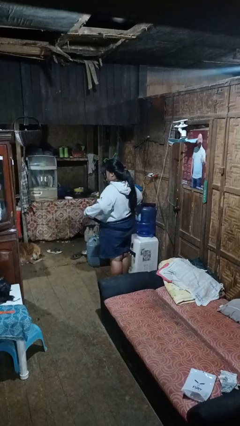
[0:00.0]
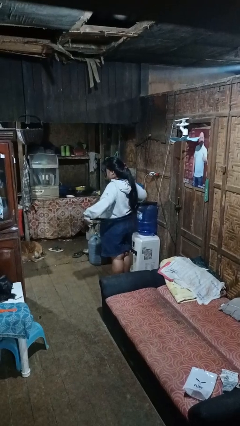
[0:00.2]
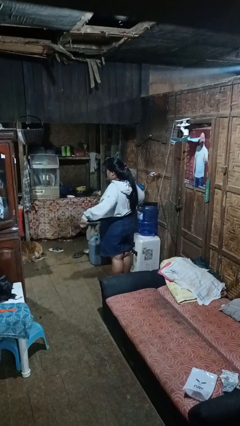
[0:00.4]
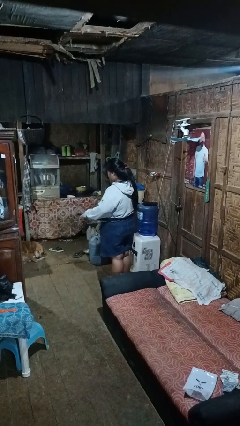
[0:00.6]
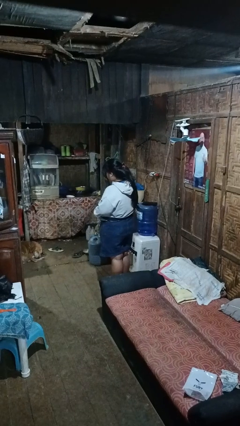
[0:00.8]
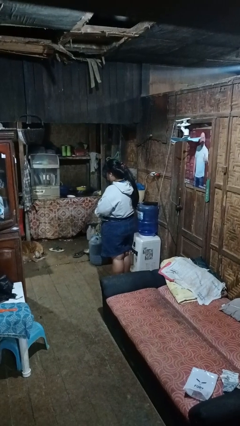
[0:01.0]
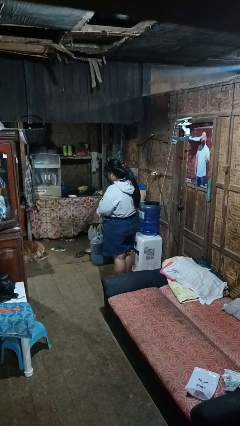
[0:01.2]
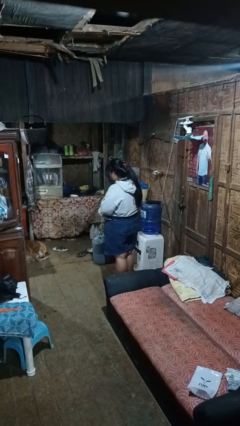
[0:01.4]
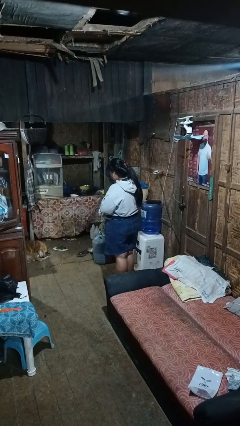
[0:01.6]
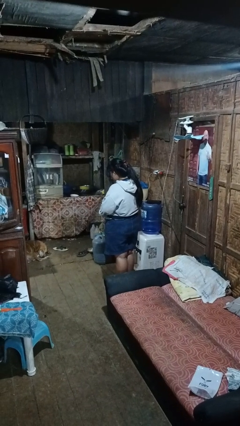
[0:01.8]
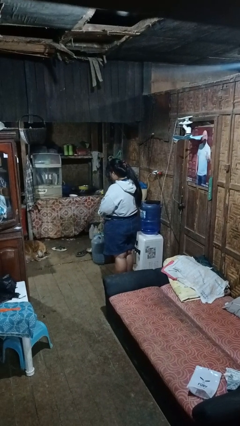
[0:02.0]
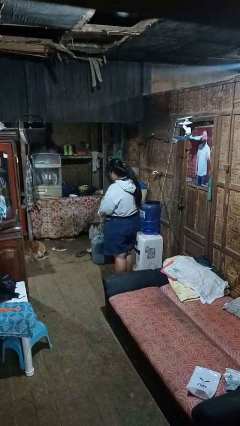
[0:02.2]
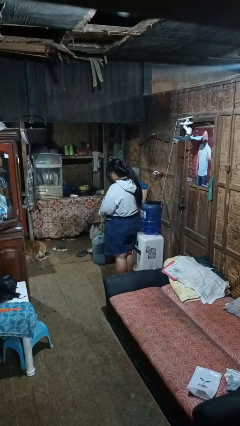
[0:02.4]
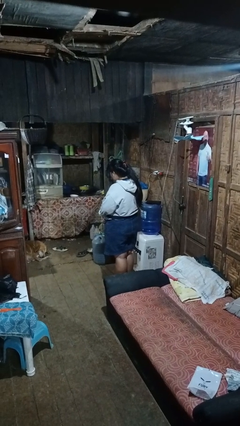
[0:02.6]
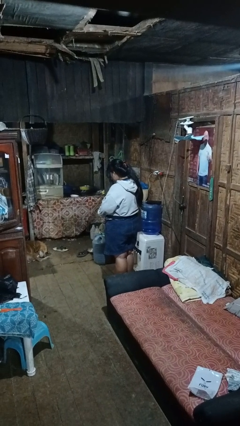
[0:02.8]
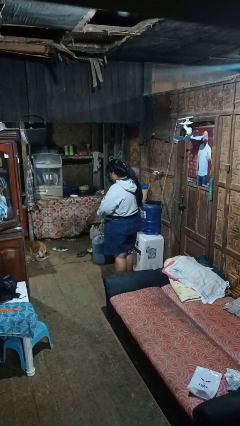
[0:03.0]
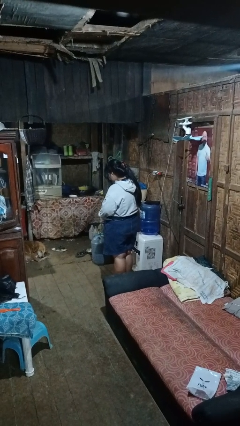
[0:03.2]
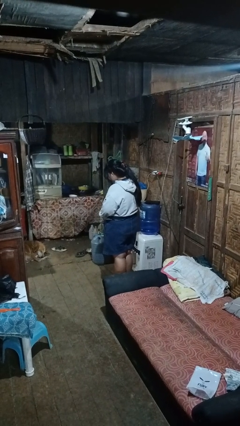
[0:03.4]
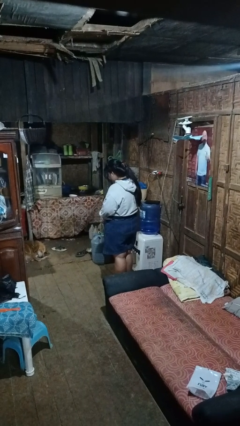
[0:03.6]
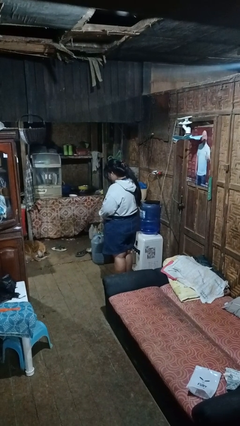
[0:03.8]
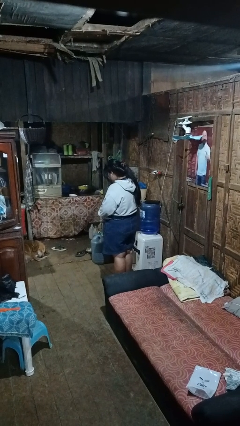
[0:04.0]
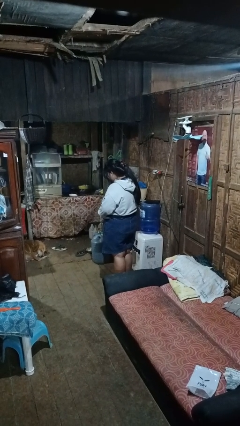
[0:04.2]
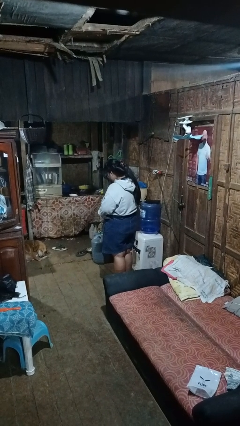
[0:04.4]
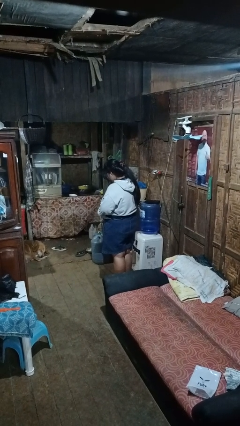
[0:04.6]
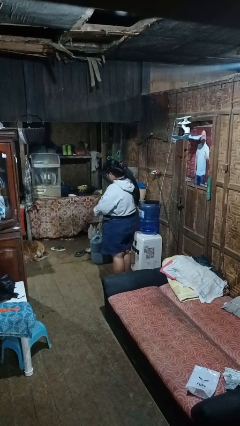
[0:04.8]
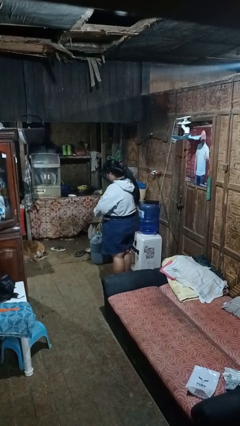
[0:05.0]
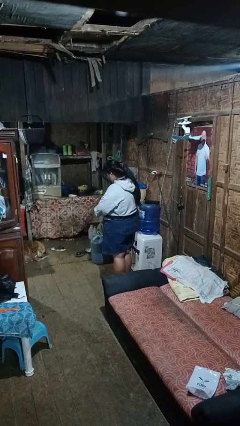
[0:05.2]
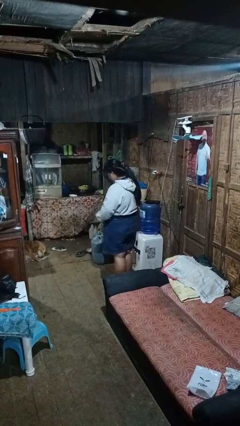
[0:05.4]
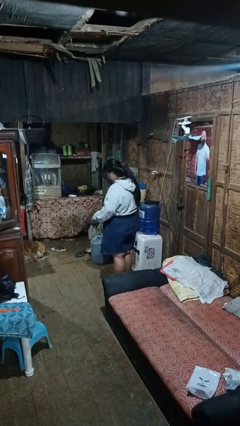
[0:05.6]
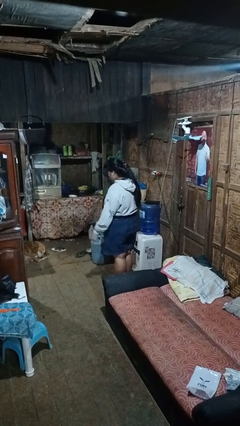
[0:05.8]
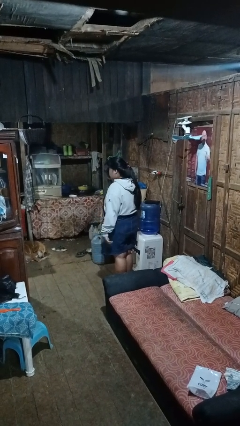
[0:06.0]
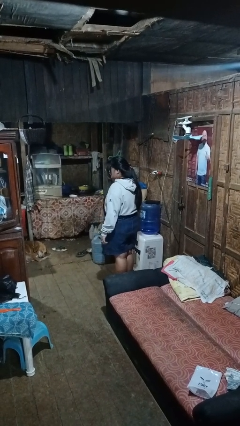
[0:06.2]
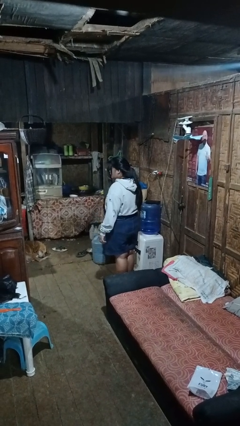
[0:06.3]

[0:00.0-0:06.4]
person puts on belt

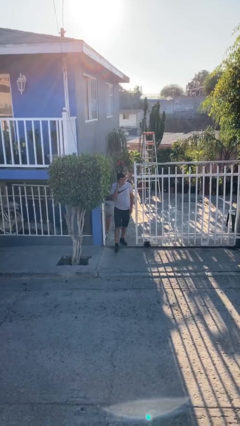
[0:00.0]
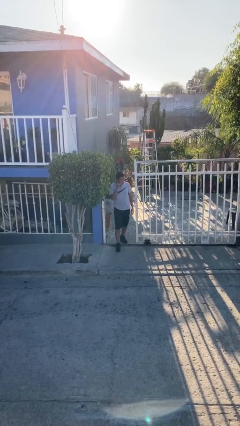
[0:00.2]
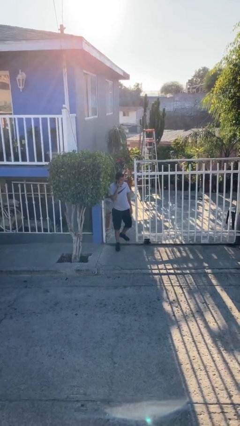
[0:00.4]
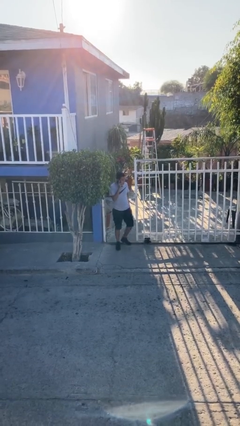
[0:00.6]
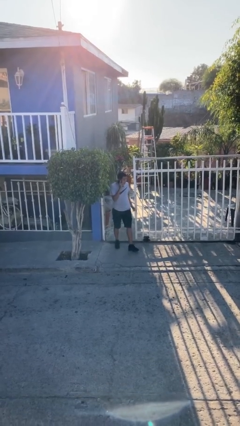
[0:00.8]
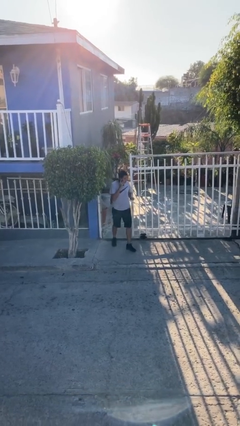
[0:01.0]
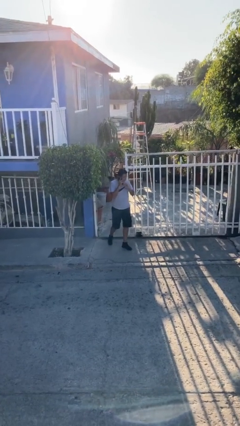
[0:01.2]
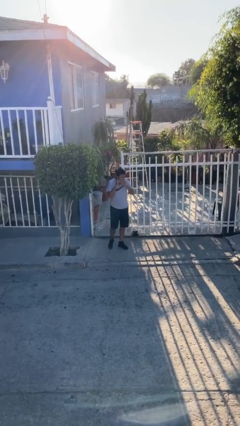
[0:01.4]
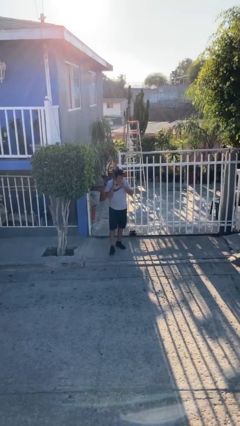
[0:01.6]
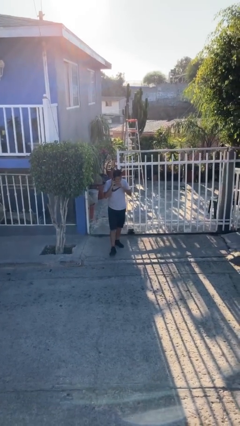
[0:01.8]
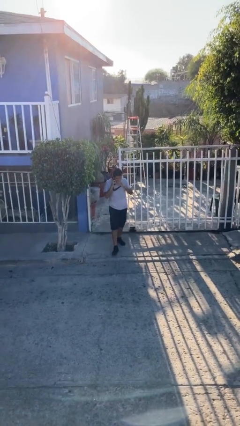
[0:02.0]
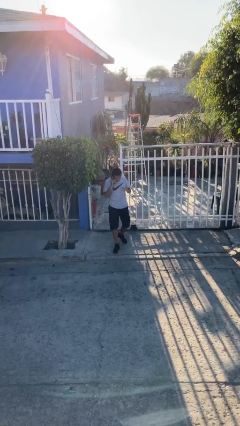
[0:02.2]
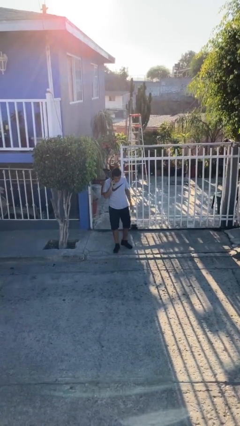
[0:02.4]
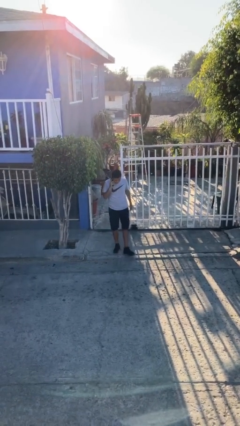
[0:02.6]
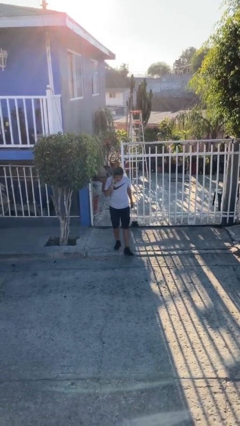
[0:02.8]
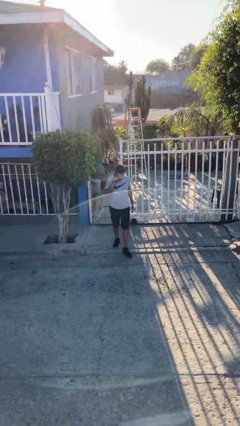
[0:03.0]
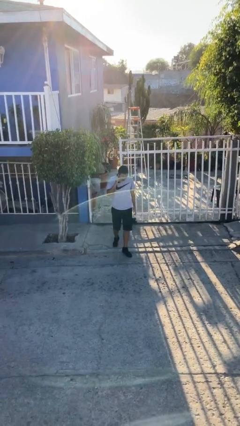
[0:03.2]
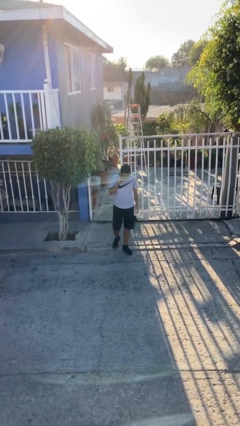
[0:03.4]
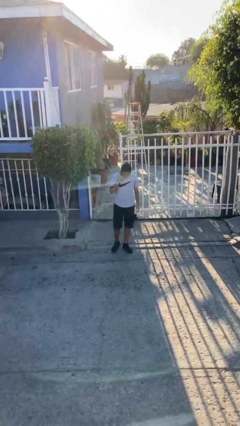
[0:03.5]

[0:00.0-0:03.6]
person enters scene through structure

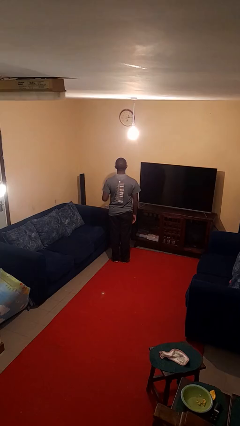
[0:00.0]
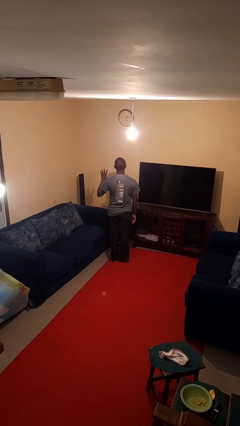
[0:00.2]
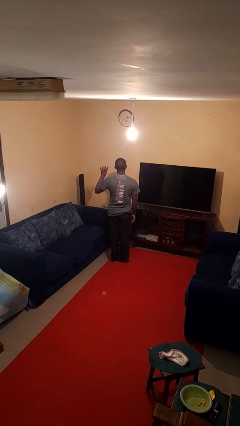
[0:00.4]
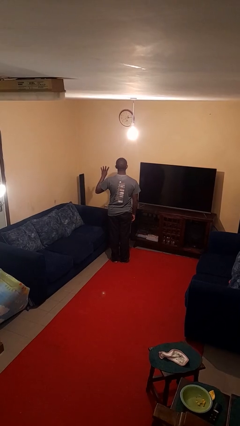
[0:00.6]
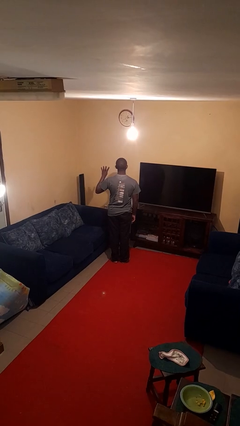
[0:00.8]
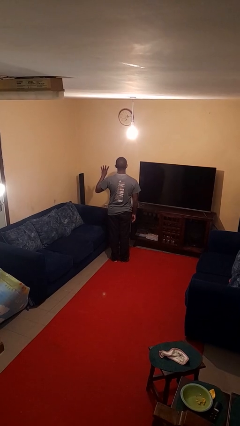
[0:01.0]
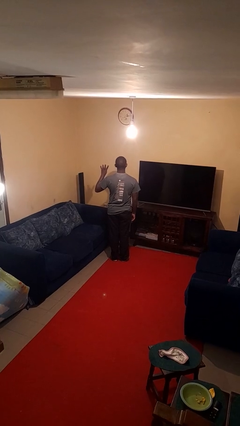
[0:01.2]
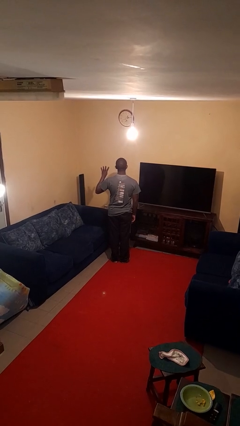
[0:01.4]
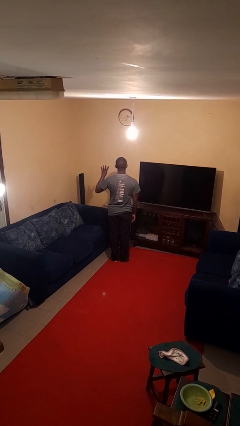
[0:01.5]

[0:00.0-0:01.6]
person gestures number four

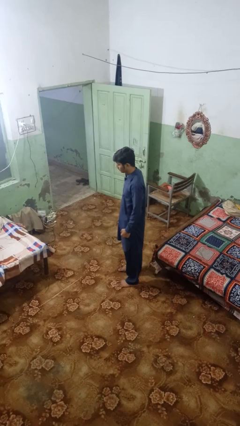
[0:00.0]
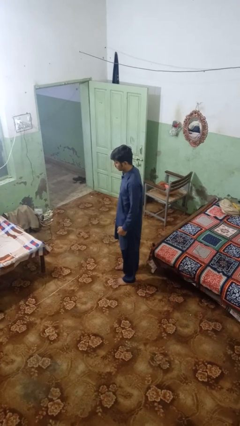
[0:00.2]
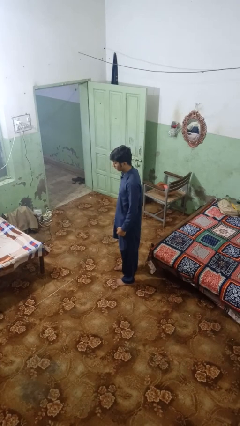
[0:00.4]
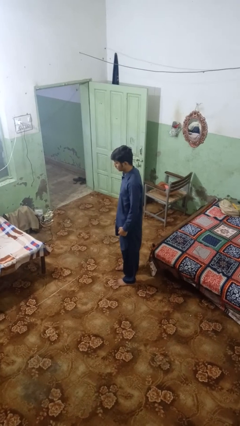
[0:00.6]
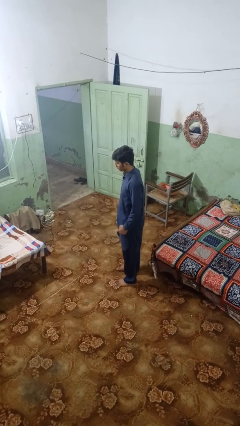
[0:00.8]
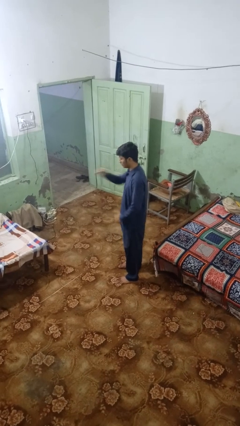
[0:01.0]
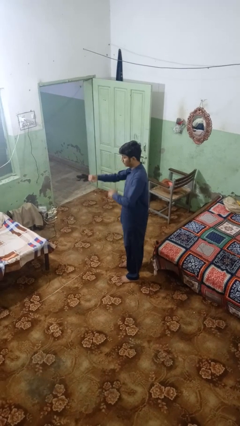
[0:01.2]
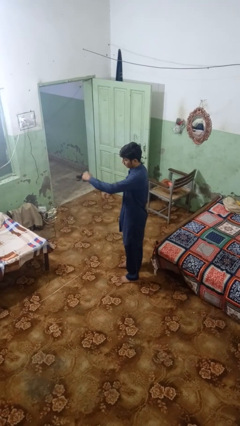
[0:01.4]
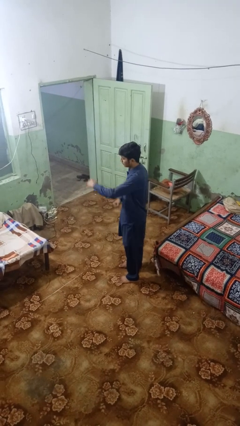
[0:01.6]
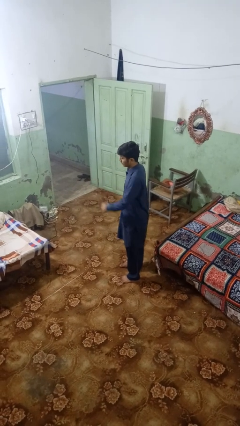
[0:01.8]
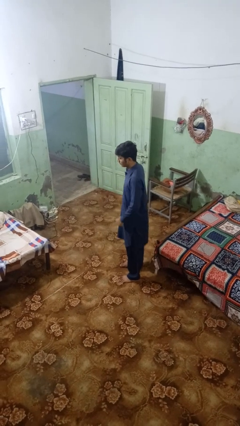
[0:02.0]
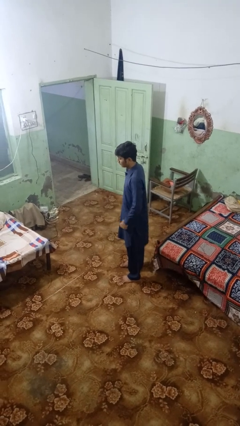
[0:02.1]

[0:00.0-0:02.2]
person punches

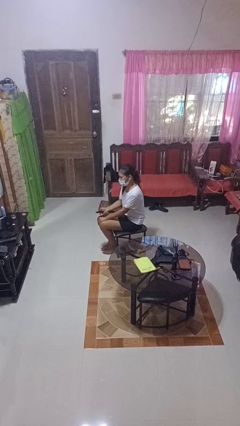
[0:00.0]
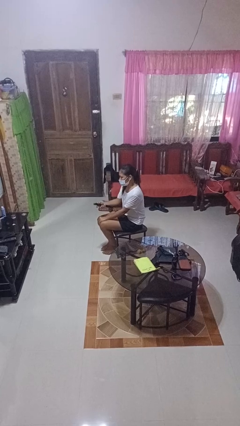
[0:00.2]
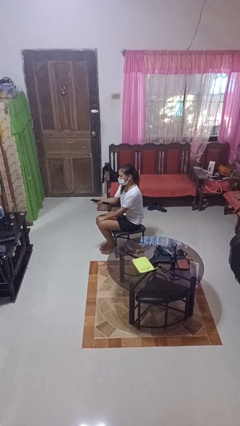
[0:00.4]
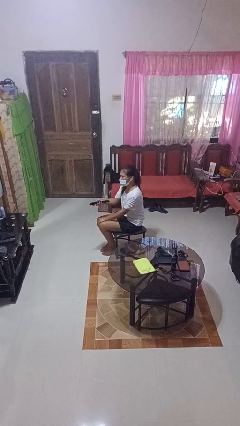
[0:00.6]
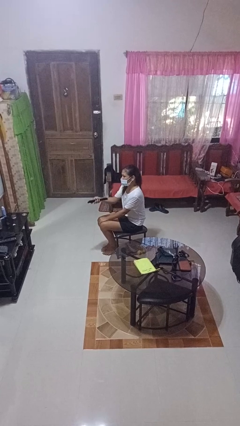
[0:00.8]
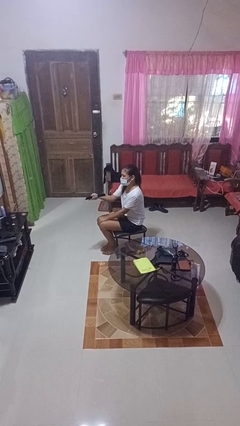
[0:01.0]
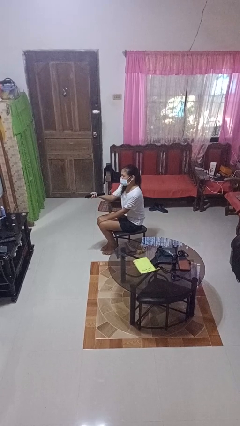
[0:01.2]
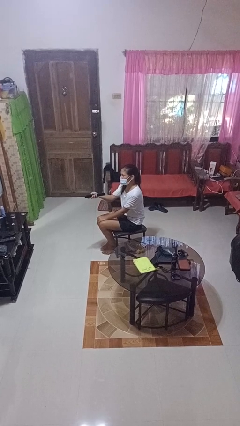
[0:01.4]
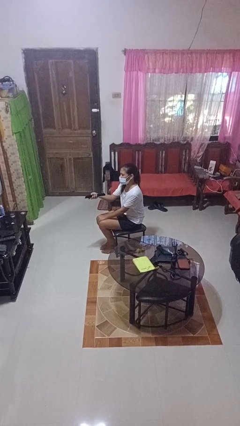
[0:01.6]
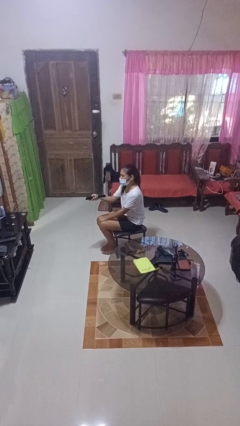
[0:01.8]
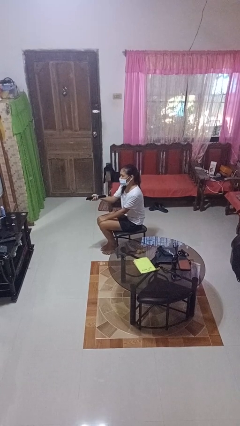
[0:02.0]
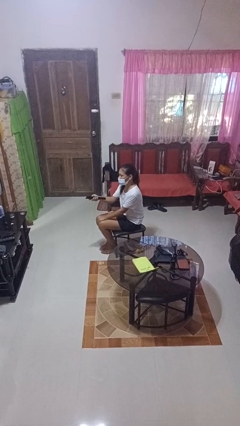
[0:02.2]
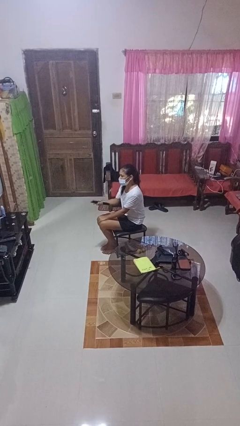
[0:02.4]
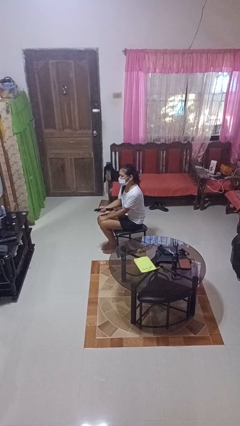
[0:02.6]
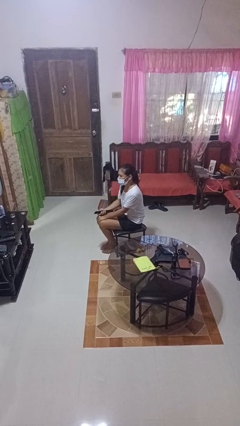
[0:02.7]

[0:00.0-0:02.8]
person uses television remote

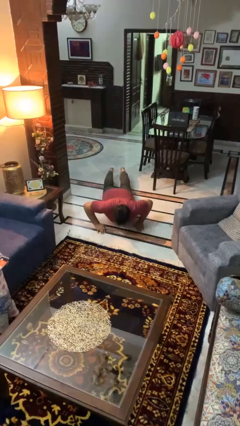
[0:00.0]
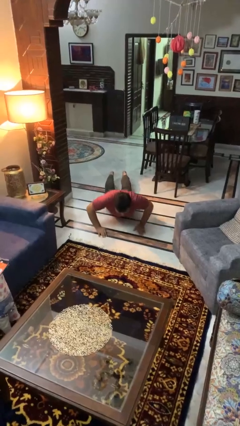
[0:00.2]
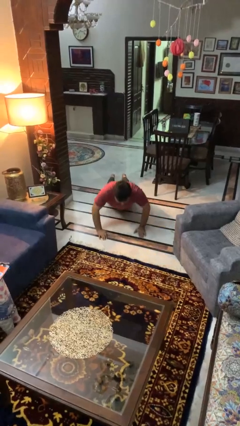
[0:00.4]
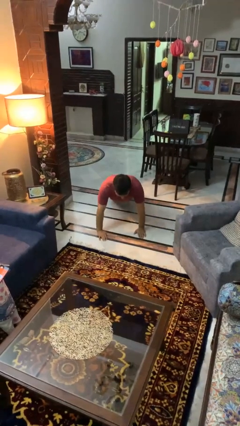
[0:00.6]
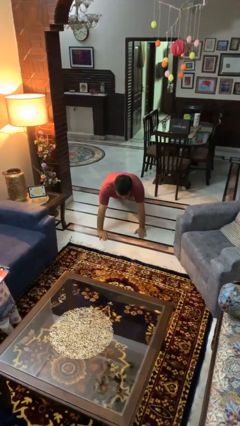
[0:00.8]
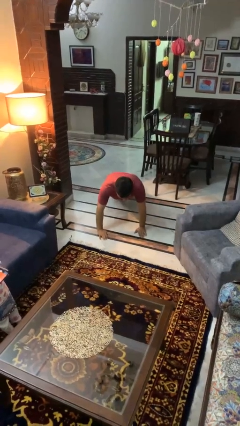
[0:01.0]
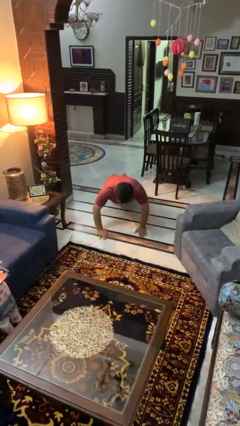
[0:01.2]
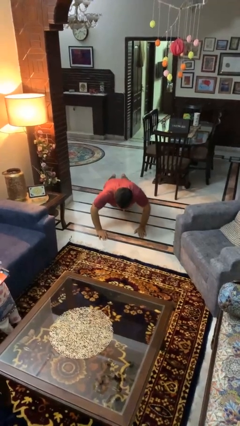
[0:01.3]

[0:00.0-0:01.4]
person exercises with pushup
